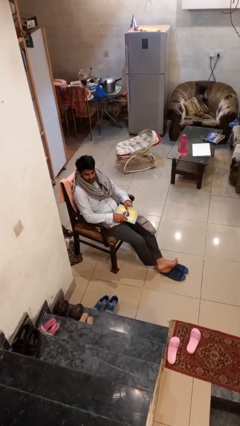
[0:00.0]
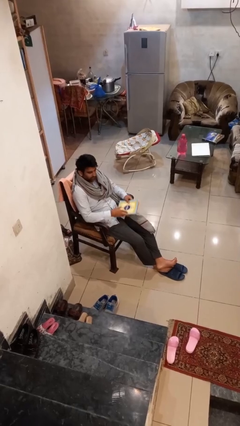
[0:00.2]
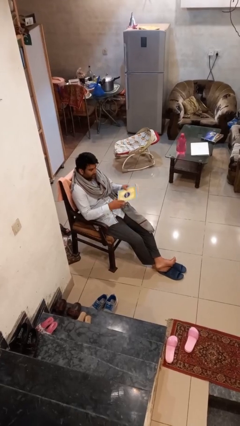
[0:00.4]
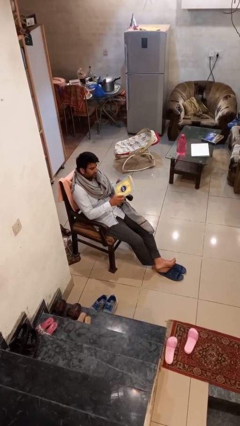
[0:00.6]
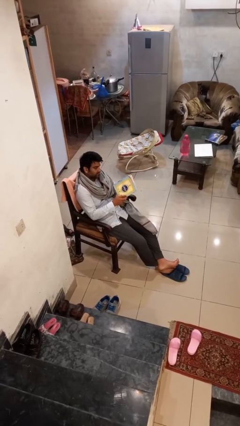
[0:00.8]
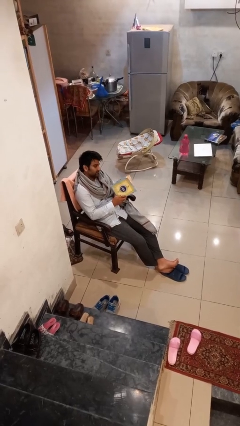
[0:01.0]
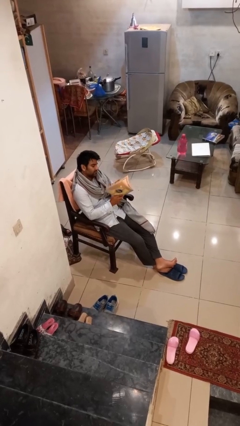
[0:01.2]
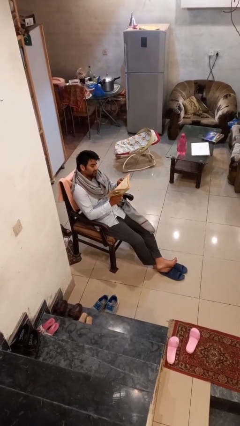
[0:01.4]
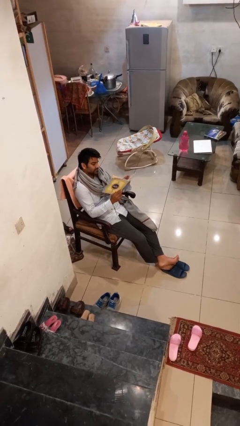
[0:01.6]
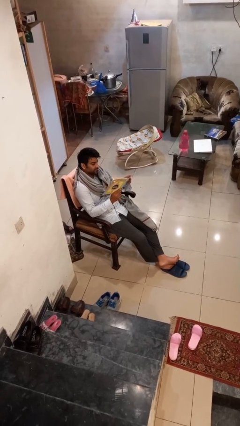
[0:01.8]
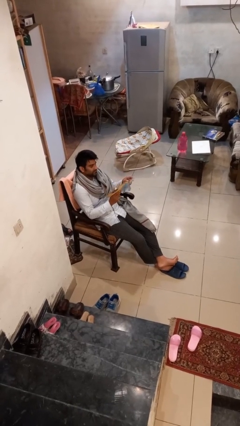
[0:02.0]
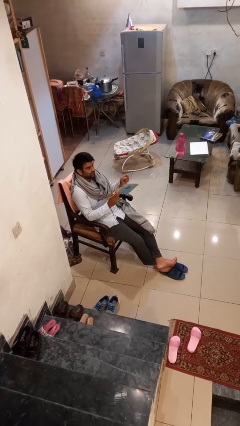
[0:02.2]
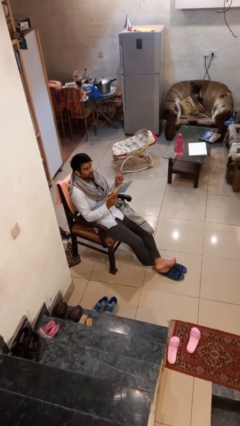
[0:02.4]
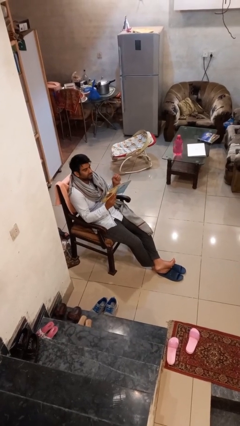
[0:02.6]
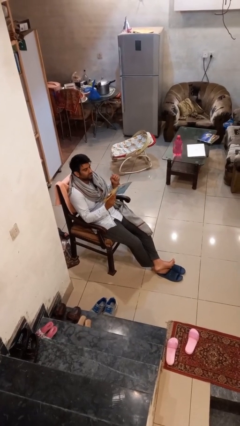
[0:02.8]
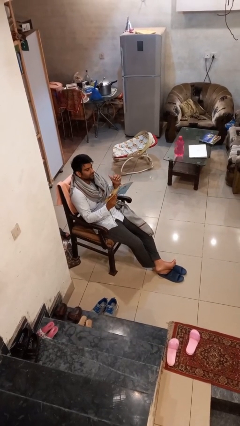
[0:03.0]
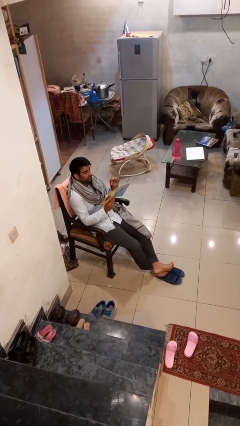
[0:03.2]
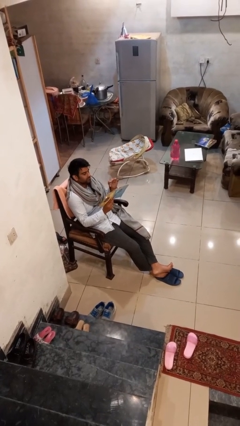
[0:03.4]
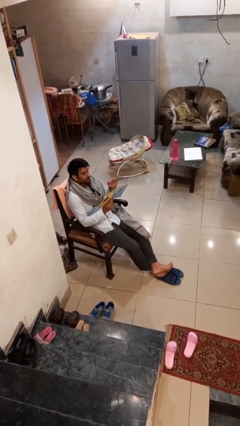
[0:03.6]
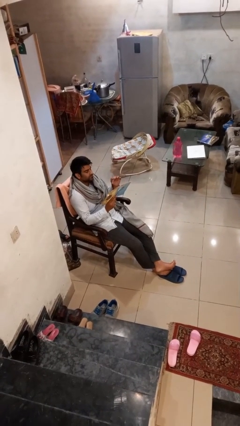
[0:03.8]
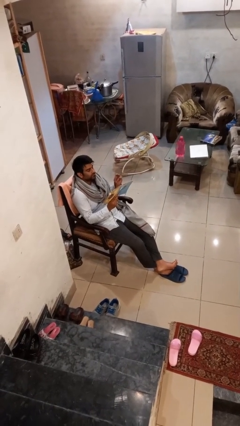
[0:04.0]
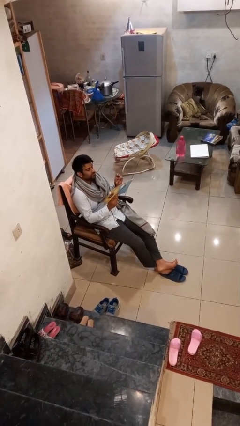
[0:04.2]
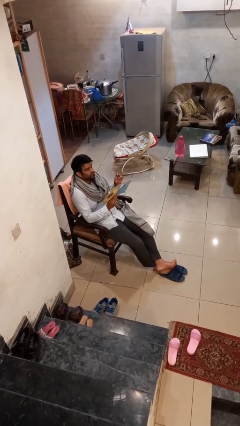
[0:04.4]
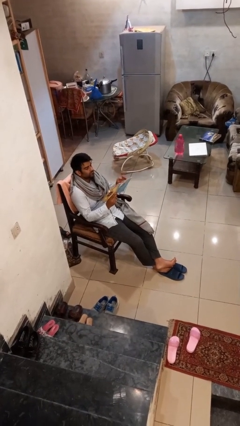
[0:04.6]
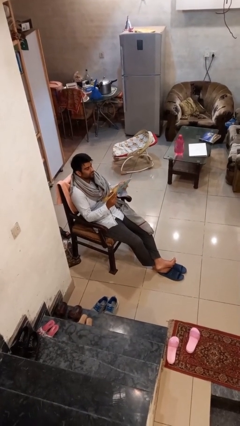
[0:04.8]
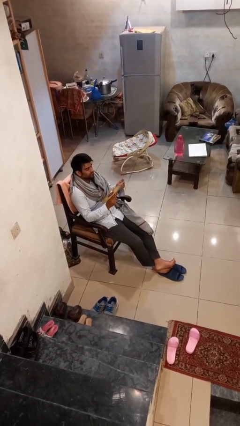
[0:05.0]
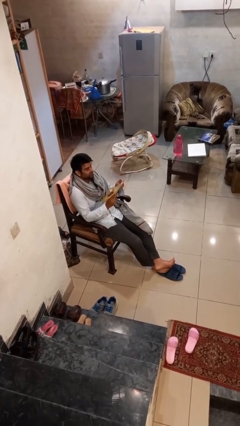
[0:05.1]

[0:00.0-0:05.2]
person reads document

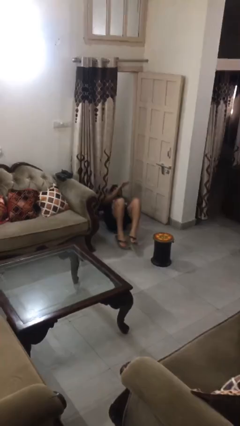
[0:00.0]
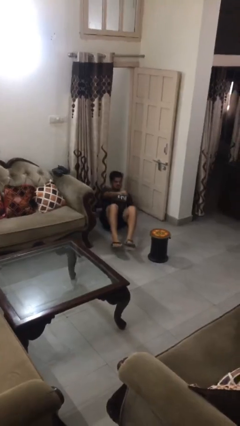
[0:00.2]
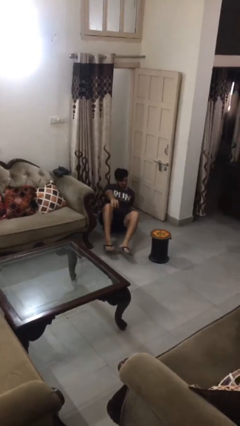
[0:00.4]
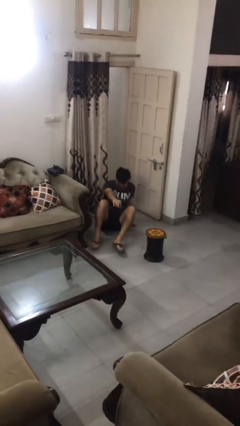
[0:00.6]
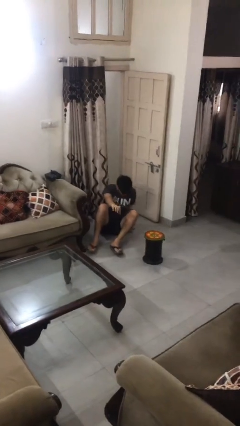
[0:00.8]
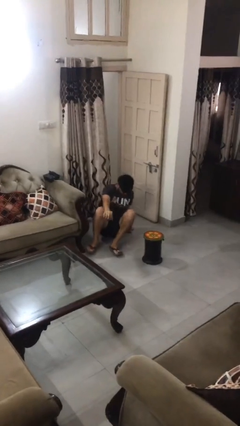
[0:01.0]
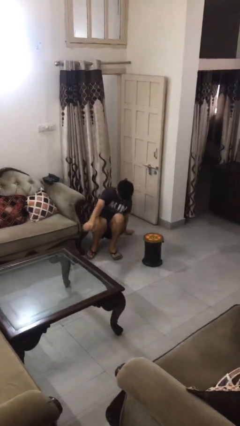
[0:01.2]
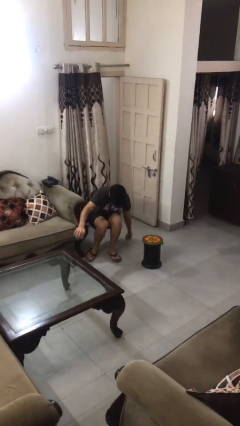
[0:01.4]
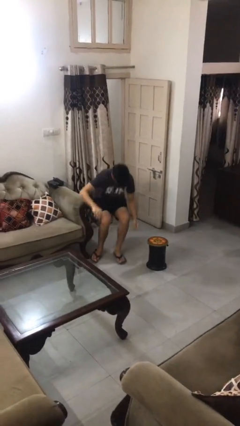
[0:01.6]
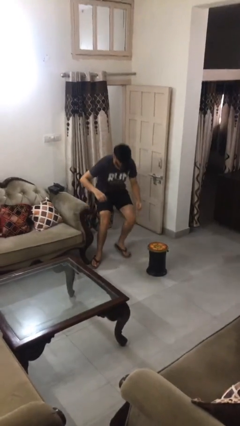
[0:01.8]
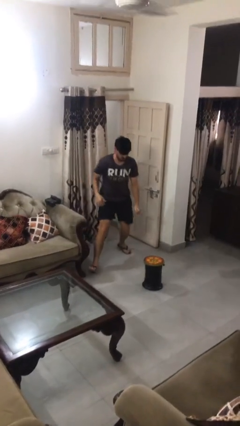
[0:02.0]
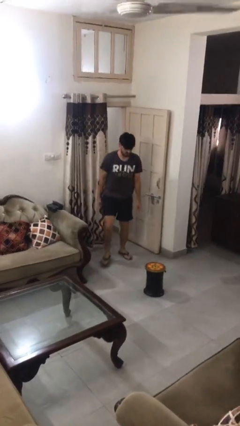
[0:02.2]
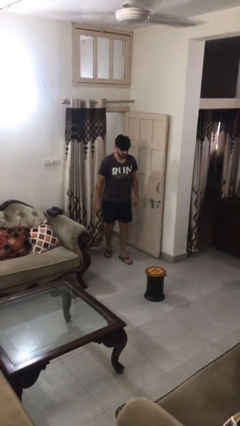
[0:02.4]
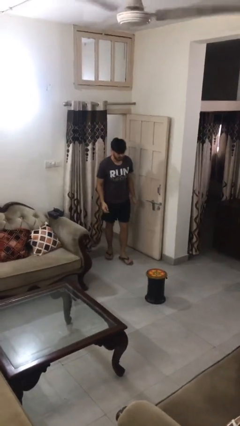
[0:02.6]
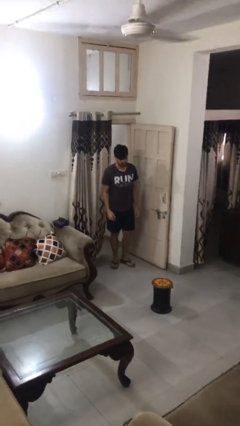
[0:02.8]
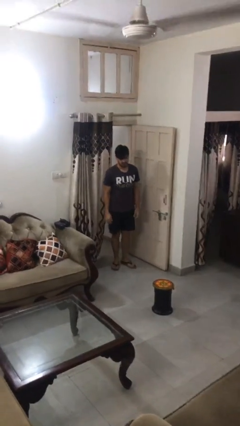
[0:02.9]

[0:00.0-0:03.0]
person stands up from floor

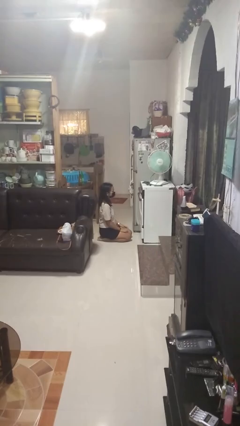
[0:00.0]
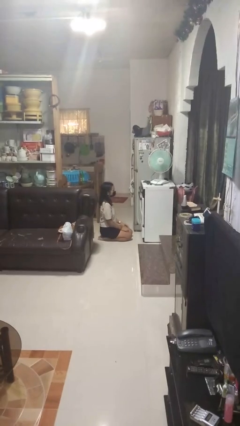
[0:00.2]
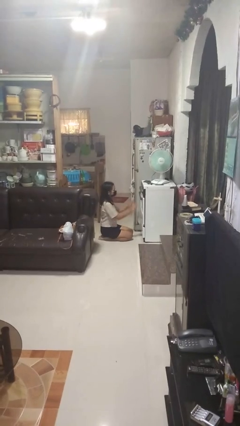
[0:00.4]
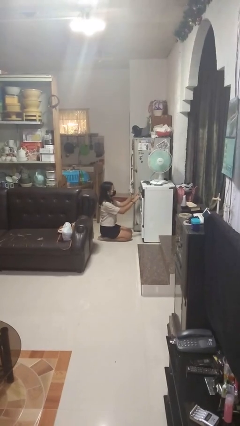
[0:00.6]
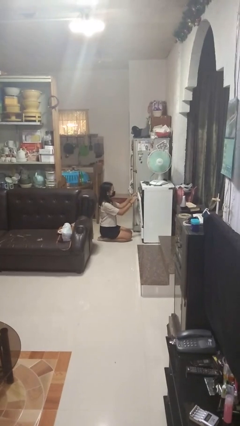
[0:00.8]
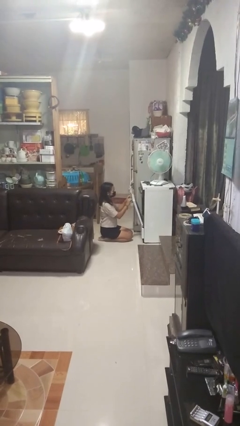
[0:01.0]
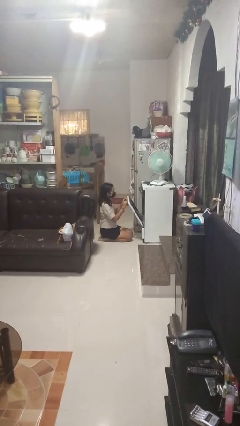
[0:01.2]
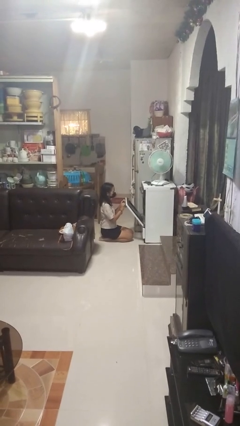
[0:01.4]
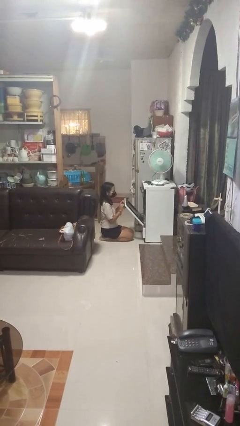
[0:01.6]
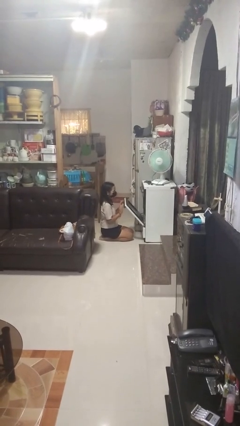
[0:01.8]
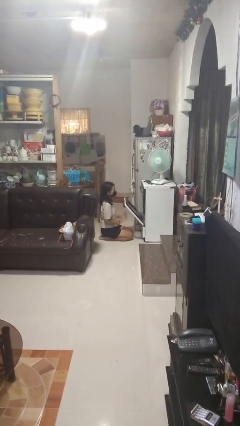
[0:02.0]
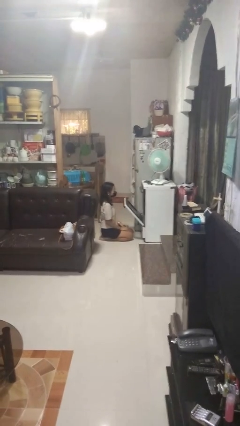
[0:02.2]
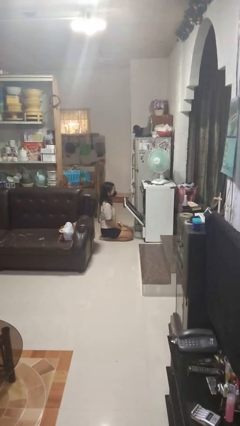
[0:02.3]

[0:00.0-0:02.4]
person opens oven door

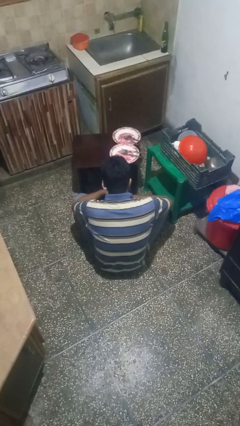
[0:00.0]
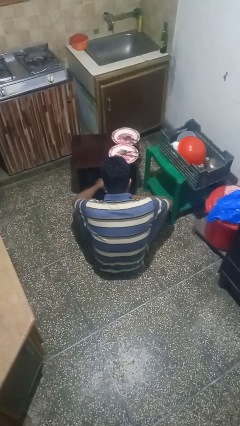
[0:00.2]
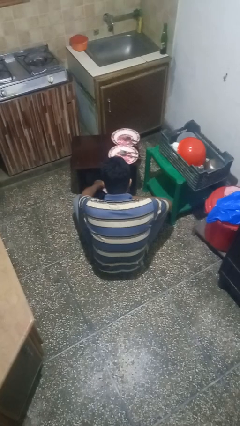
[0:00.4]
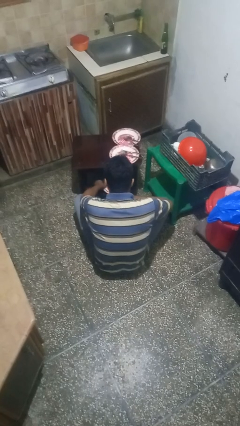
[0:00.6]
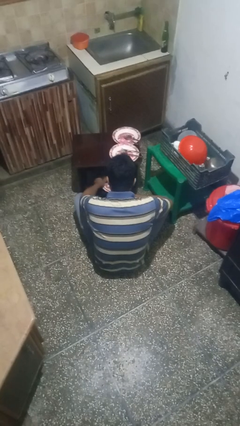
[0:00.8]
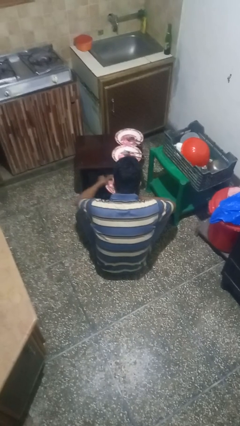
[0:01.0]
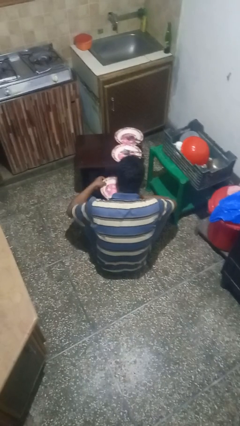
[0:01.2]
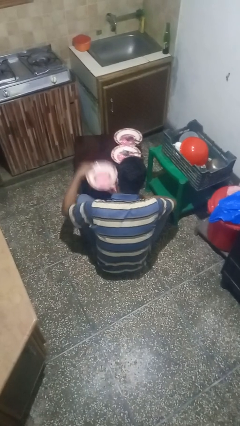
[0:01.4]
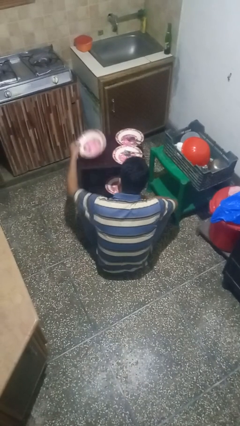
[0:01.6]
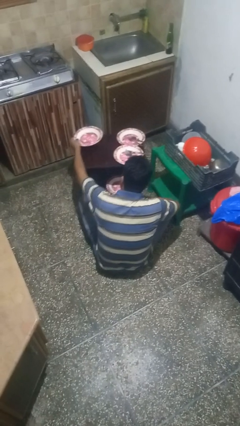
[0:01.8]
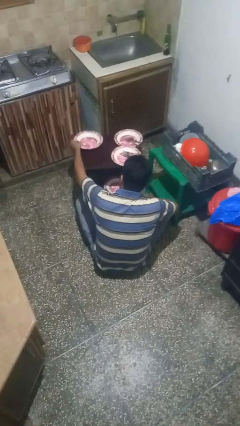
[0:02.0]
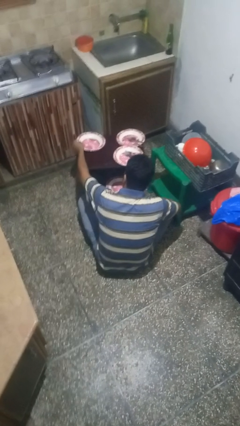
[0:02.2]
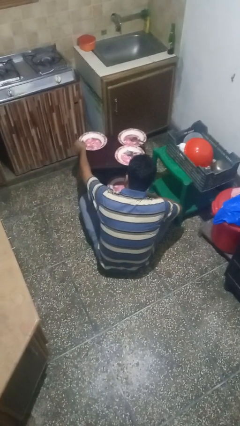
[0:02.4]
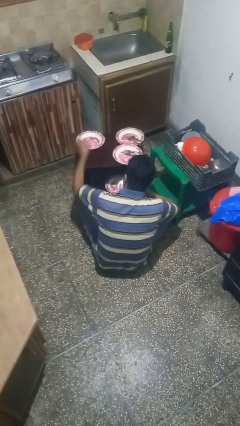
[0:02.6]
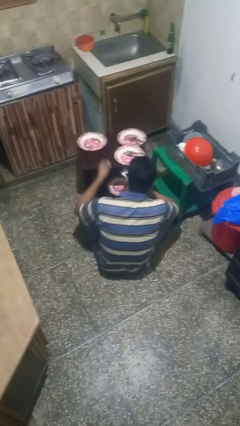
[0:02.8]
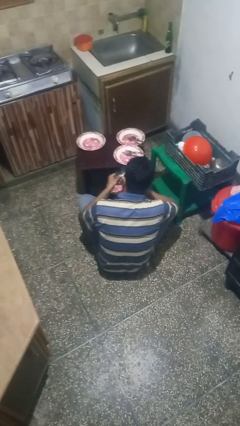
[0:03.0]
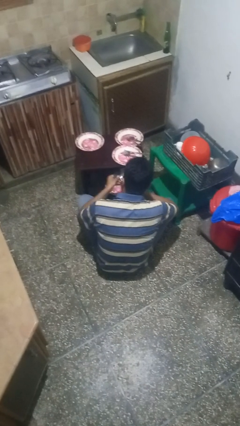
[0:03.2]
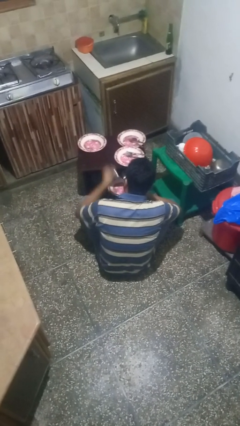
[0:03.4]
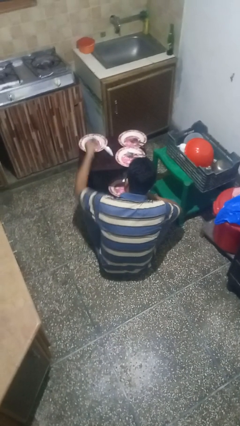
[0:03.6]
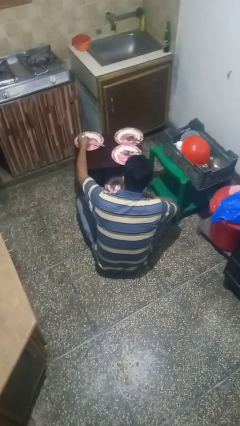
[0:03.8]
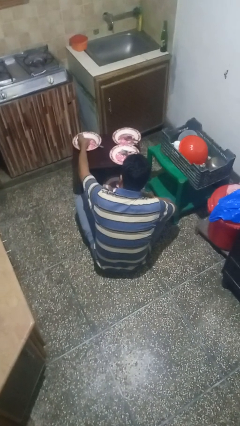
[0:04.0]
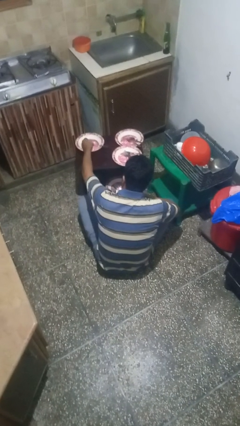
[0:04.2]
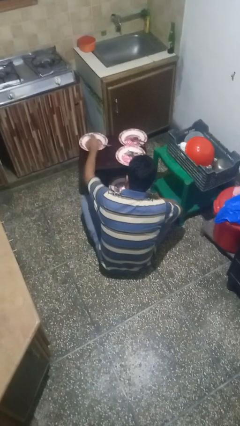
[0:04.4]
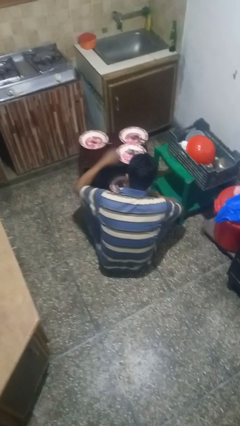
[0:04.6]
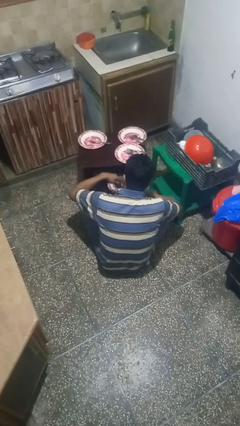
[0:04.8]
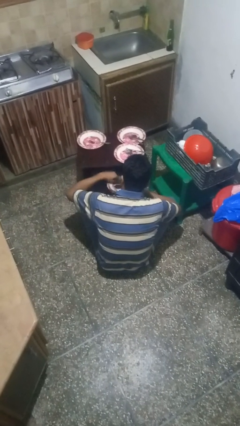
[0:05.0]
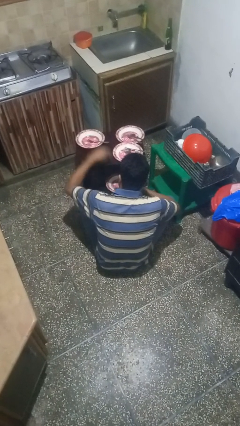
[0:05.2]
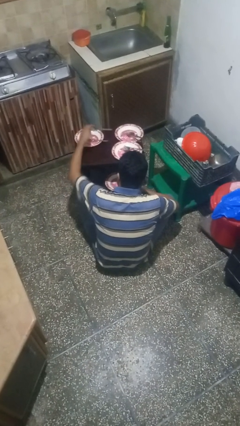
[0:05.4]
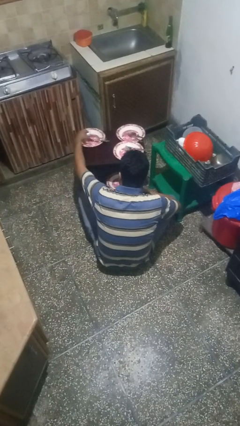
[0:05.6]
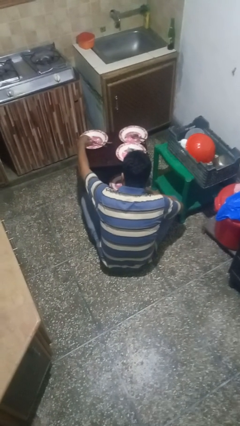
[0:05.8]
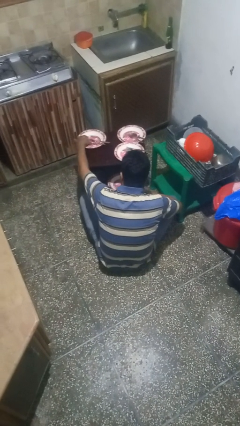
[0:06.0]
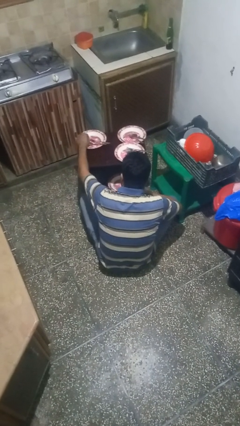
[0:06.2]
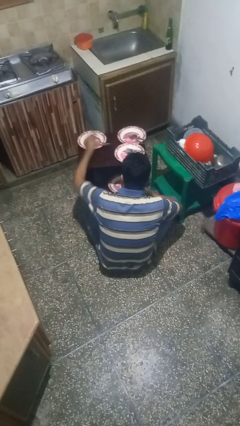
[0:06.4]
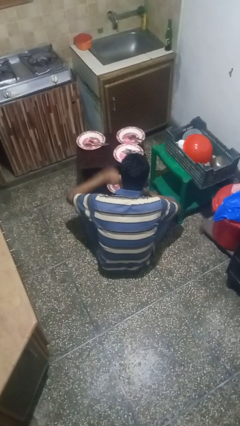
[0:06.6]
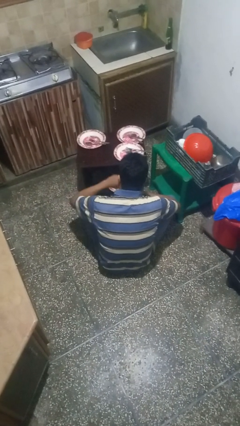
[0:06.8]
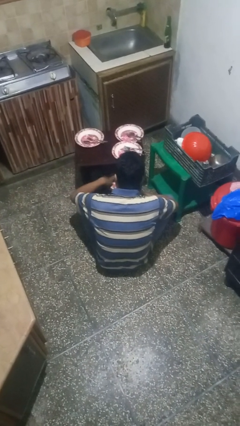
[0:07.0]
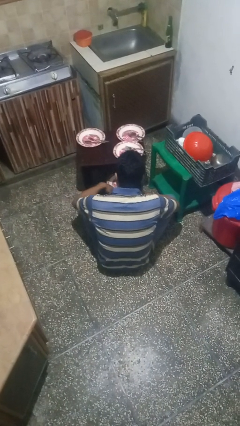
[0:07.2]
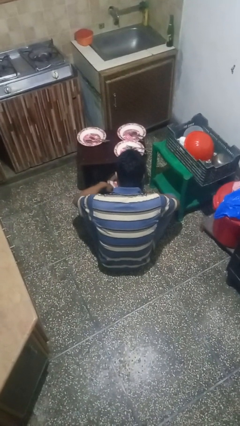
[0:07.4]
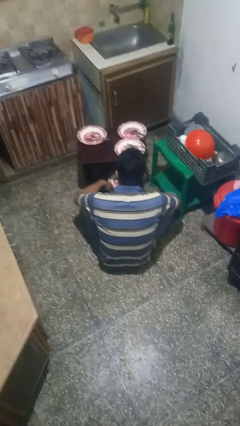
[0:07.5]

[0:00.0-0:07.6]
person sets table
